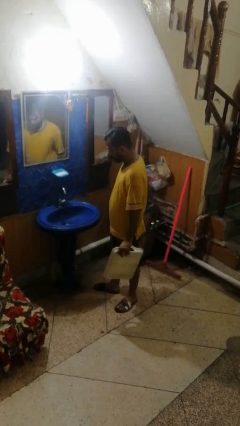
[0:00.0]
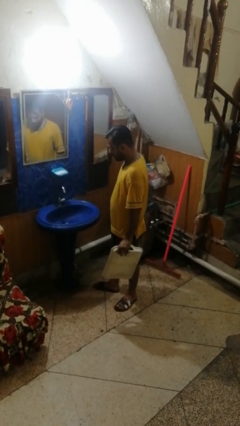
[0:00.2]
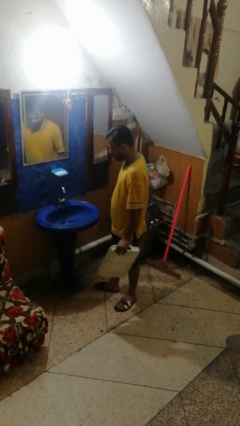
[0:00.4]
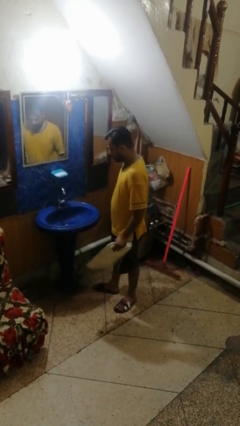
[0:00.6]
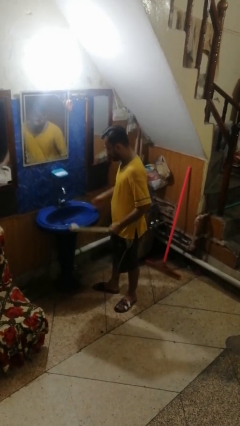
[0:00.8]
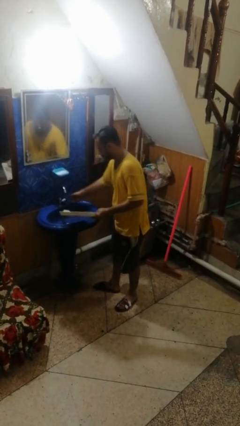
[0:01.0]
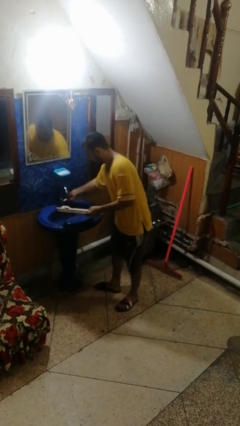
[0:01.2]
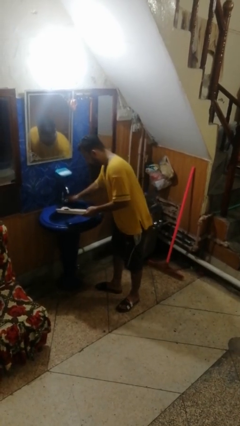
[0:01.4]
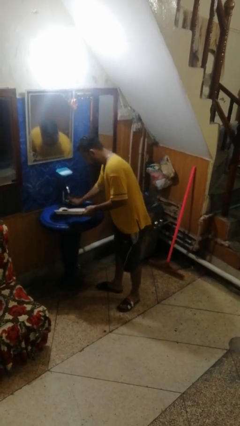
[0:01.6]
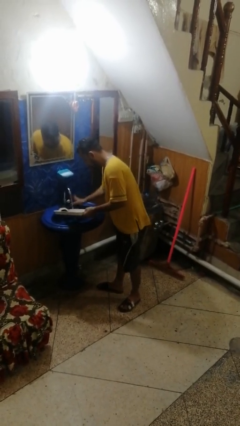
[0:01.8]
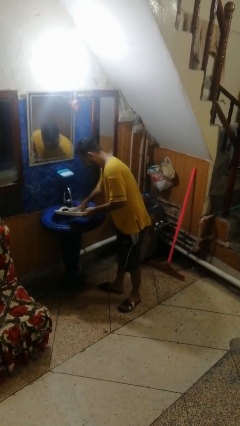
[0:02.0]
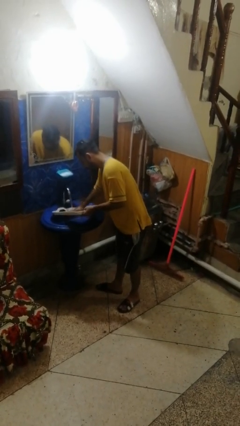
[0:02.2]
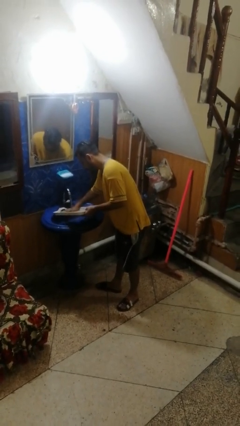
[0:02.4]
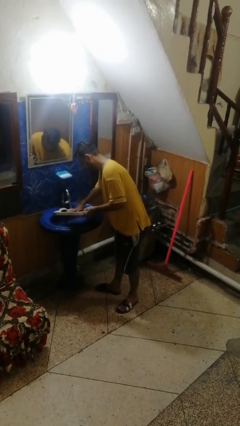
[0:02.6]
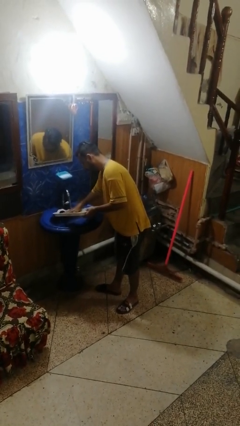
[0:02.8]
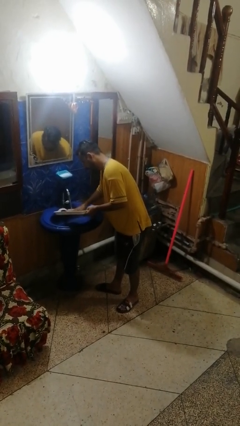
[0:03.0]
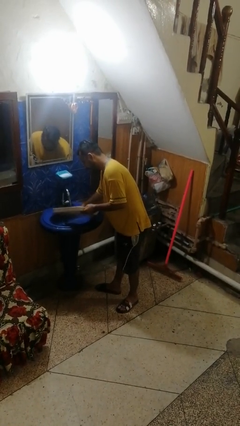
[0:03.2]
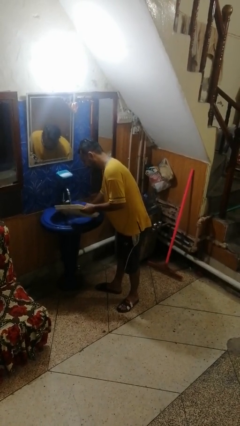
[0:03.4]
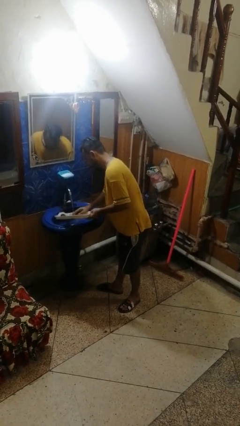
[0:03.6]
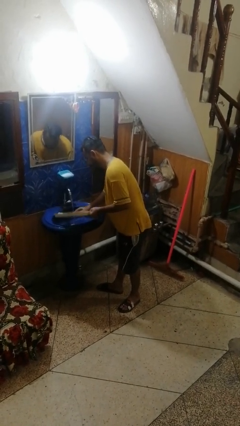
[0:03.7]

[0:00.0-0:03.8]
person washes dish

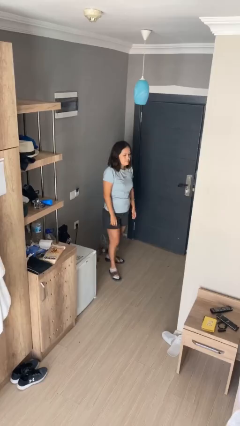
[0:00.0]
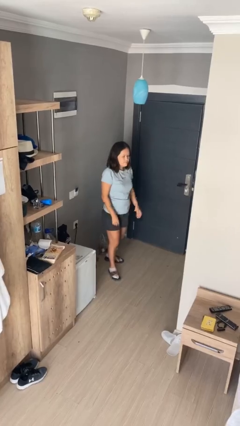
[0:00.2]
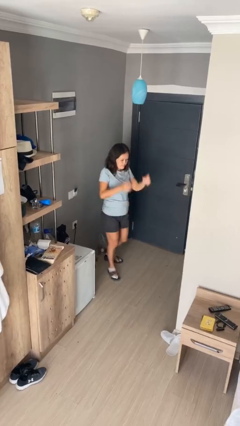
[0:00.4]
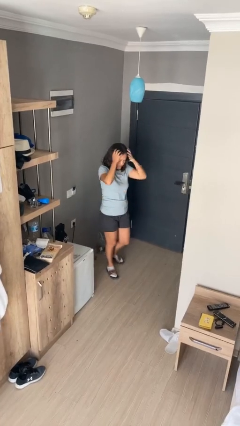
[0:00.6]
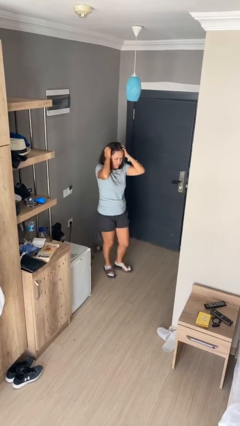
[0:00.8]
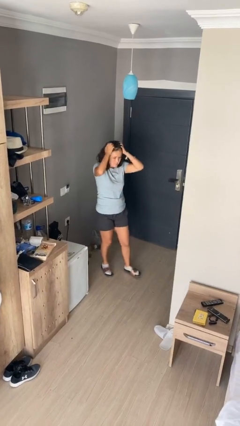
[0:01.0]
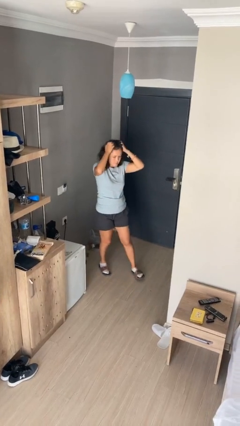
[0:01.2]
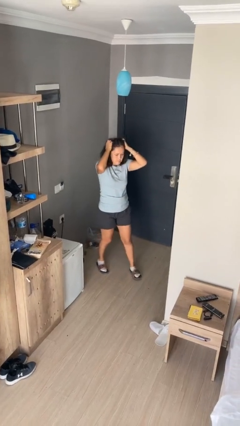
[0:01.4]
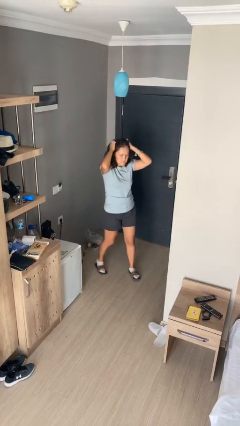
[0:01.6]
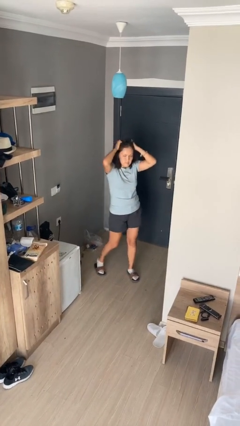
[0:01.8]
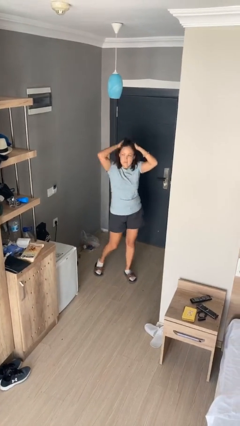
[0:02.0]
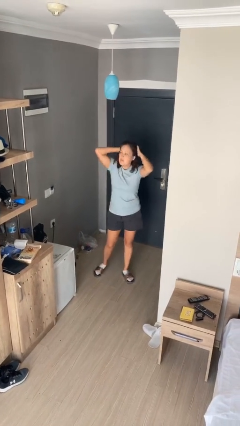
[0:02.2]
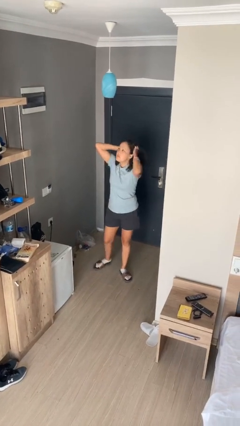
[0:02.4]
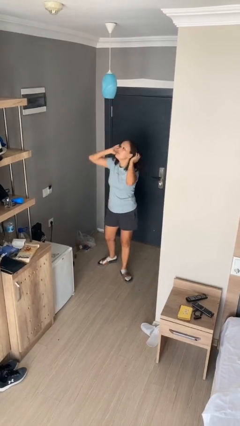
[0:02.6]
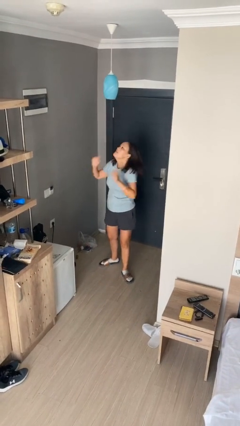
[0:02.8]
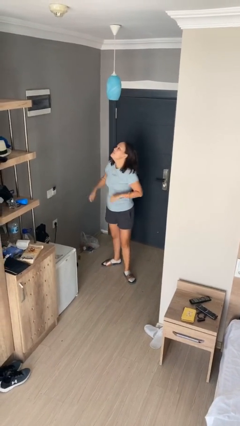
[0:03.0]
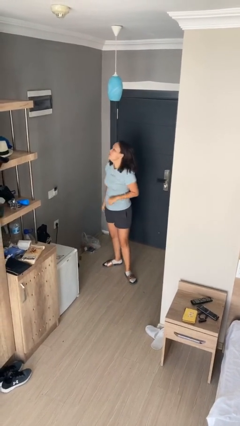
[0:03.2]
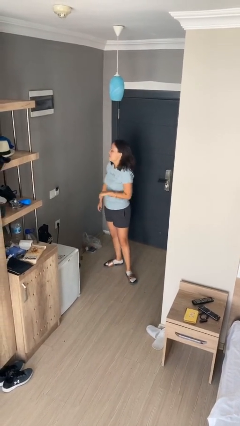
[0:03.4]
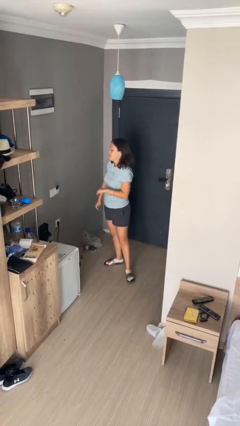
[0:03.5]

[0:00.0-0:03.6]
person scratches face

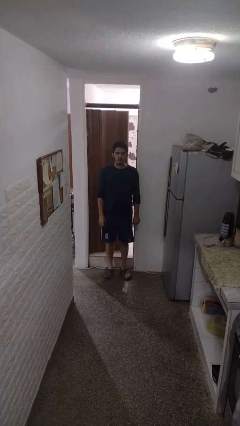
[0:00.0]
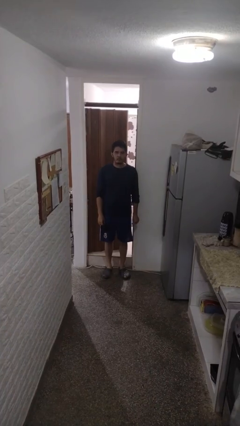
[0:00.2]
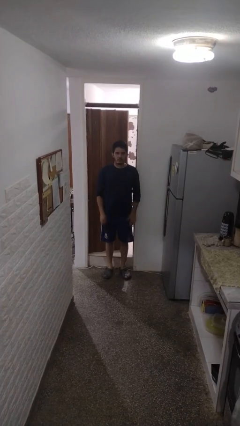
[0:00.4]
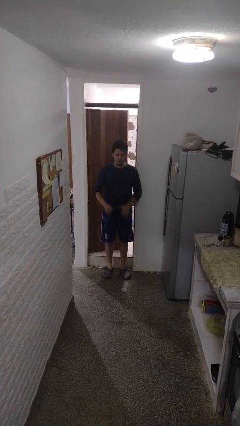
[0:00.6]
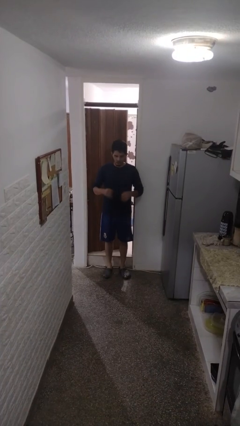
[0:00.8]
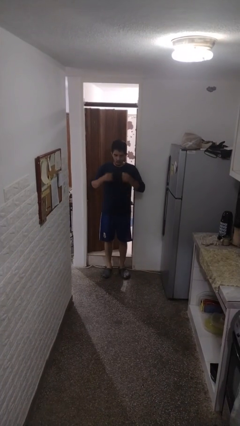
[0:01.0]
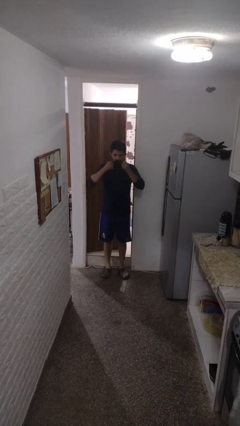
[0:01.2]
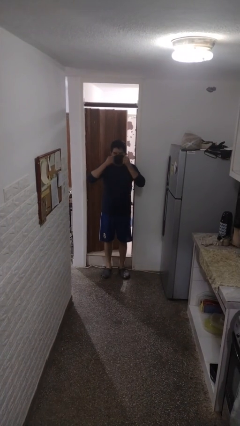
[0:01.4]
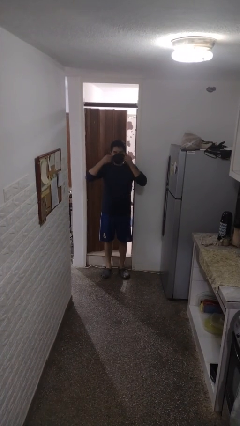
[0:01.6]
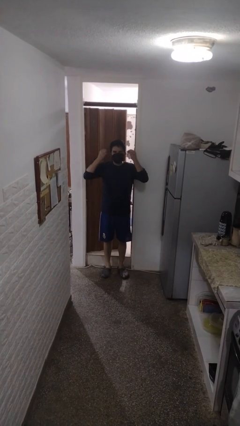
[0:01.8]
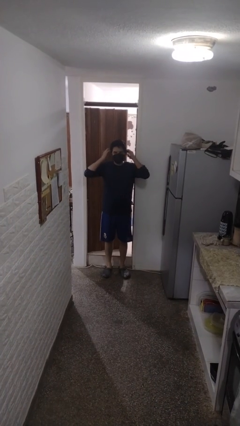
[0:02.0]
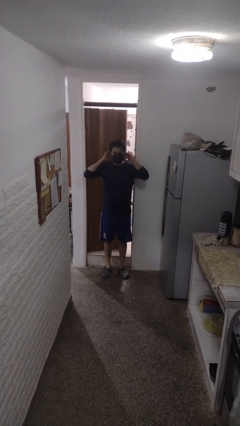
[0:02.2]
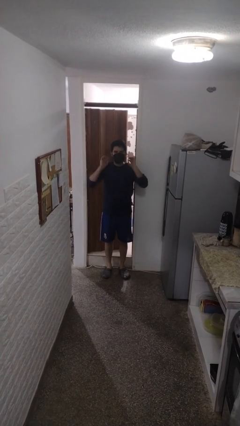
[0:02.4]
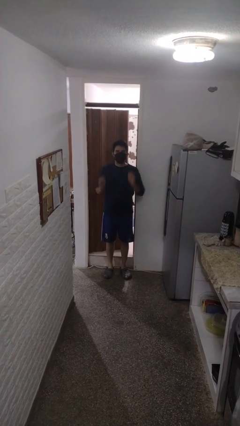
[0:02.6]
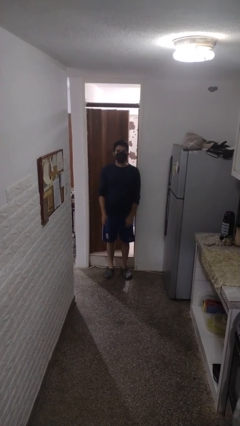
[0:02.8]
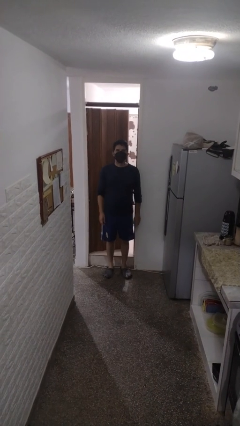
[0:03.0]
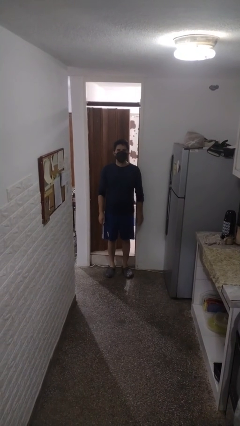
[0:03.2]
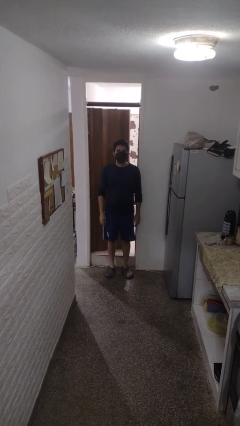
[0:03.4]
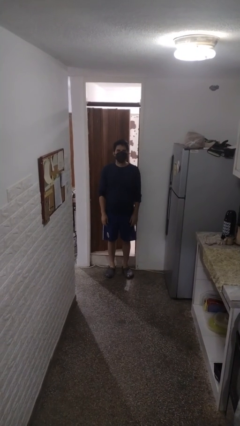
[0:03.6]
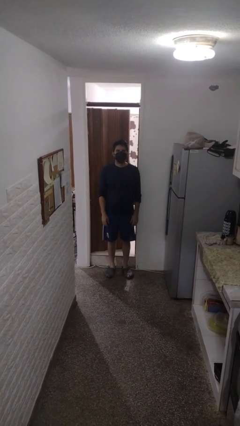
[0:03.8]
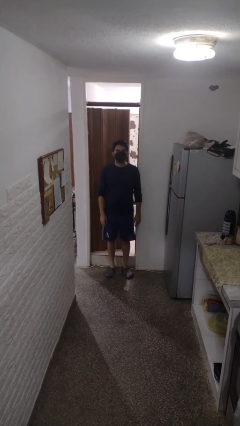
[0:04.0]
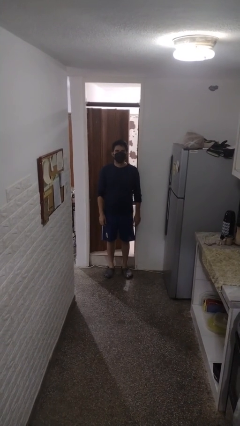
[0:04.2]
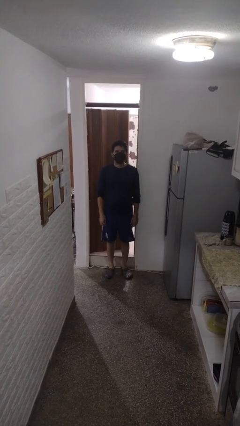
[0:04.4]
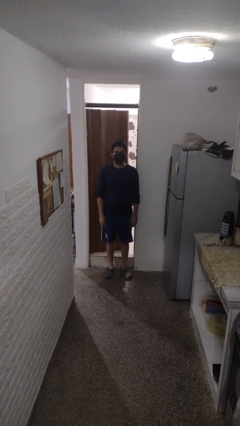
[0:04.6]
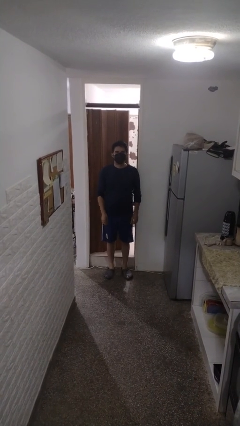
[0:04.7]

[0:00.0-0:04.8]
person puts on facemask

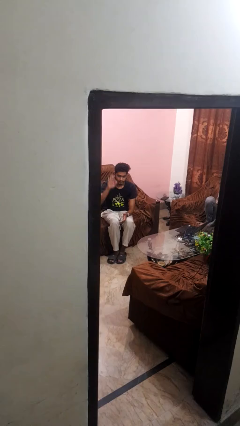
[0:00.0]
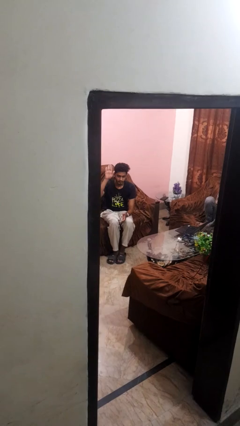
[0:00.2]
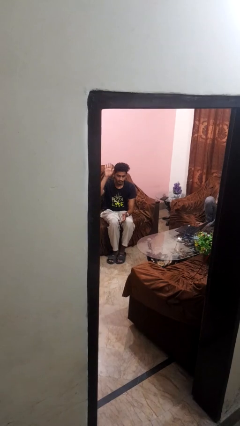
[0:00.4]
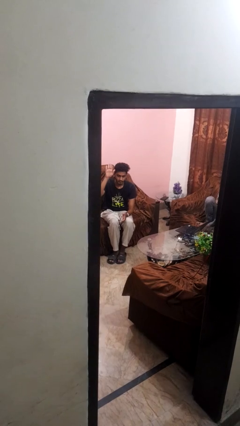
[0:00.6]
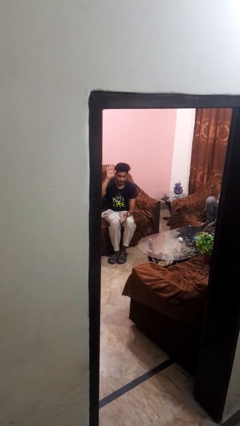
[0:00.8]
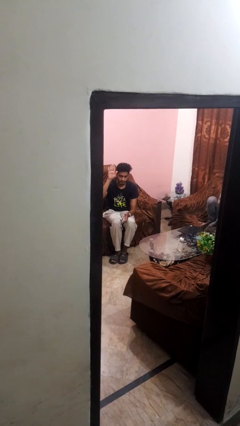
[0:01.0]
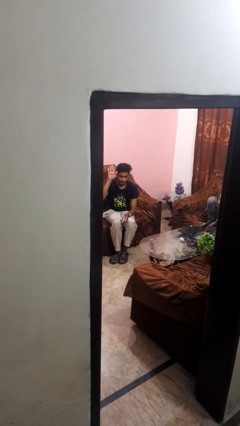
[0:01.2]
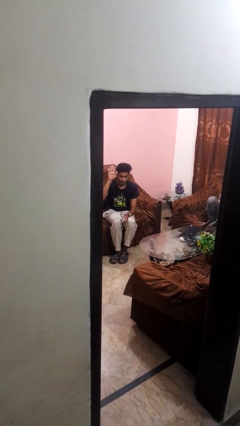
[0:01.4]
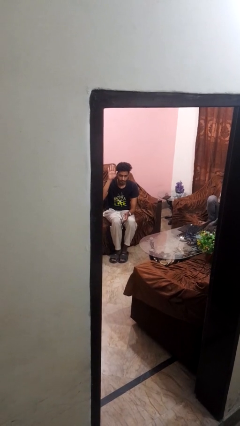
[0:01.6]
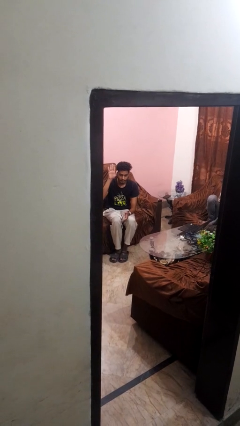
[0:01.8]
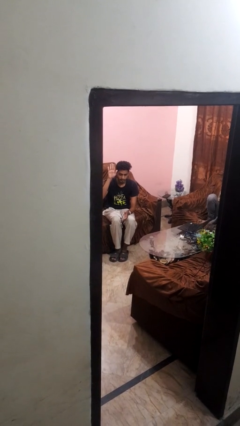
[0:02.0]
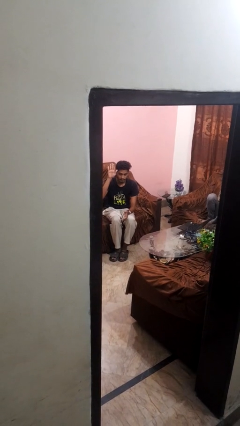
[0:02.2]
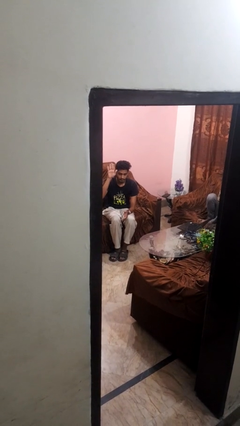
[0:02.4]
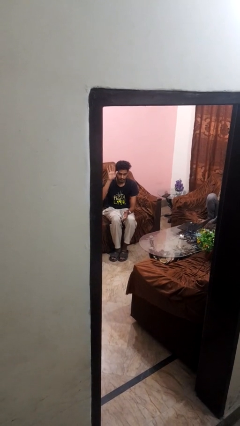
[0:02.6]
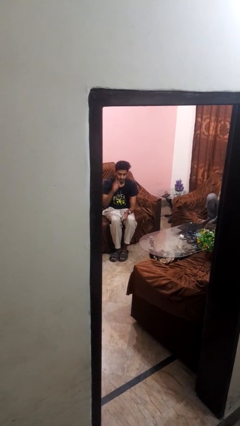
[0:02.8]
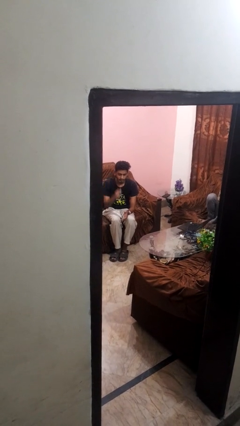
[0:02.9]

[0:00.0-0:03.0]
person gestures raise hand

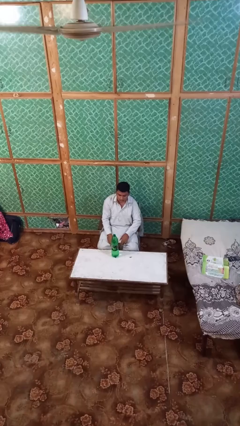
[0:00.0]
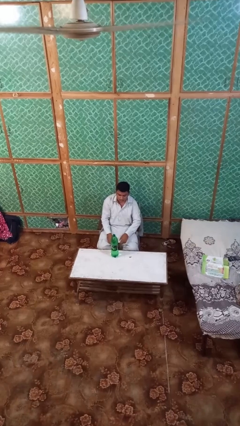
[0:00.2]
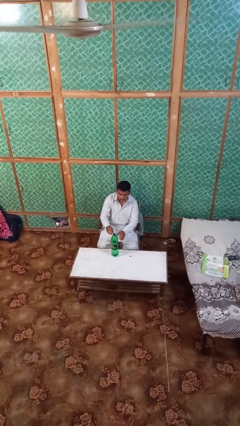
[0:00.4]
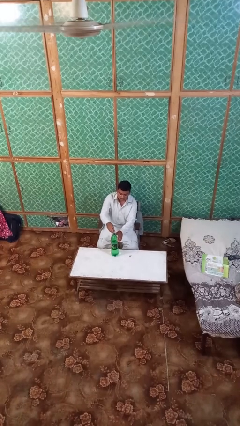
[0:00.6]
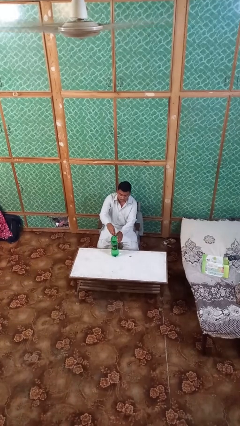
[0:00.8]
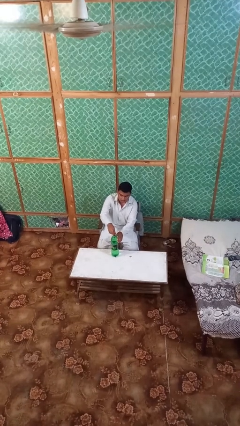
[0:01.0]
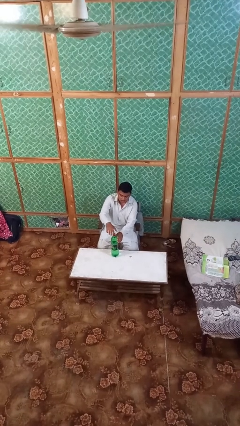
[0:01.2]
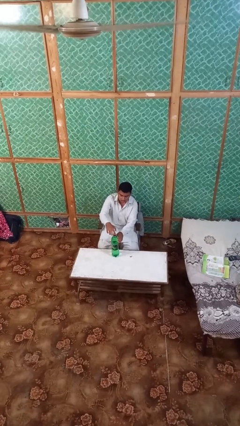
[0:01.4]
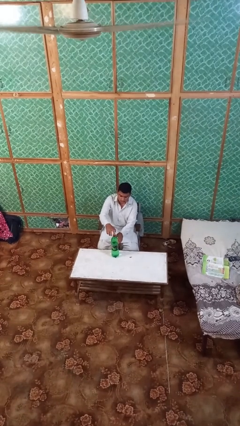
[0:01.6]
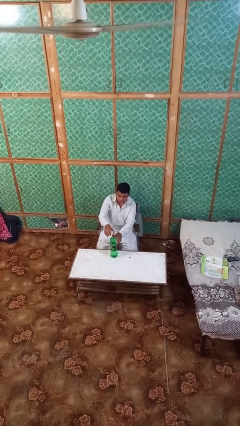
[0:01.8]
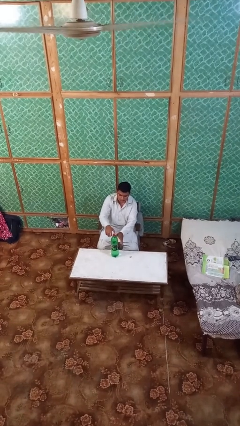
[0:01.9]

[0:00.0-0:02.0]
person screws lid to bottle

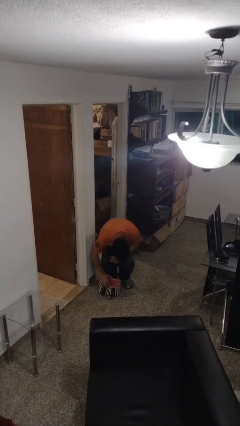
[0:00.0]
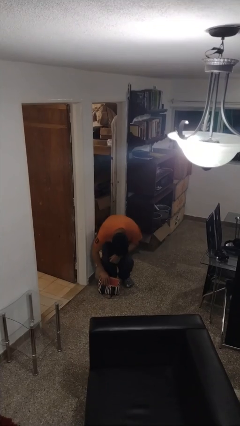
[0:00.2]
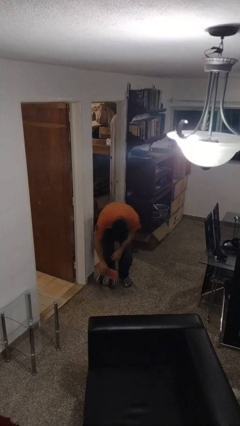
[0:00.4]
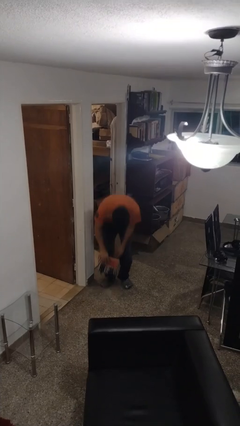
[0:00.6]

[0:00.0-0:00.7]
person picks up object from floor
